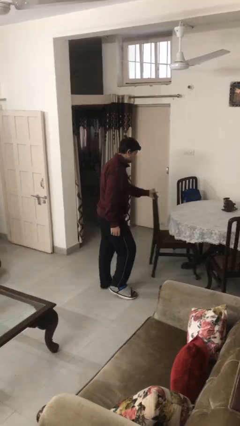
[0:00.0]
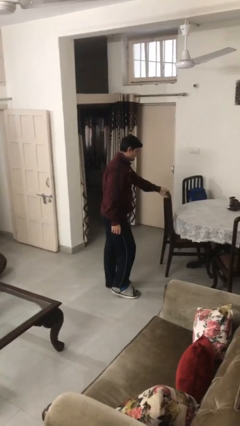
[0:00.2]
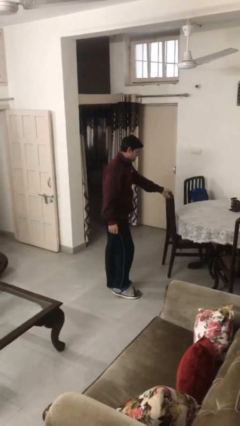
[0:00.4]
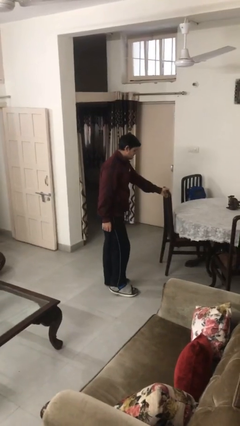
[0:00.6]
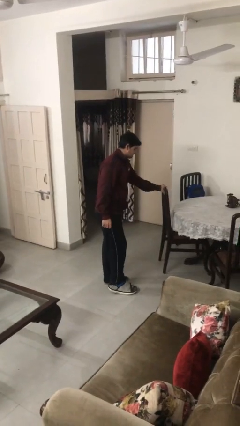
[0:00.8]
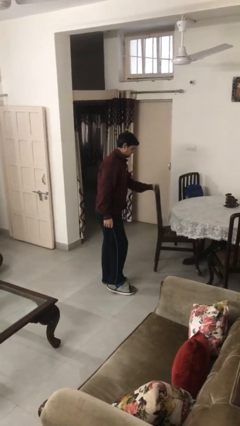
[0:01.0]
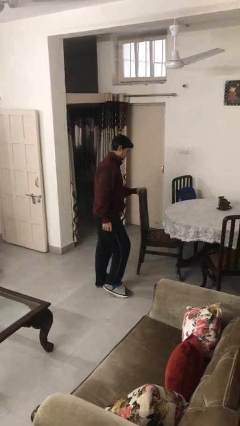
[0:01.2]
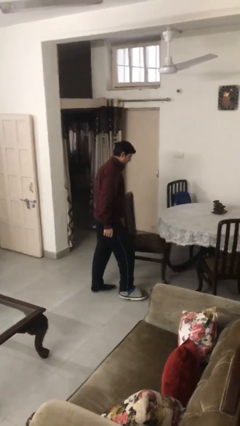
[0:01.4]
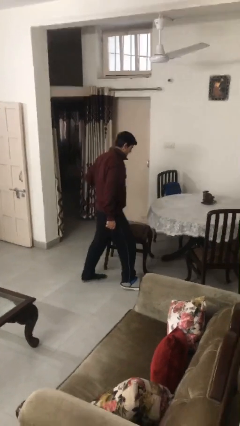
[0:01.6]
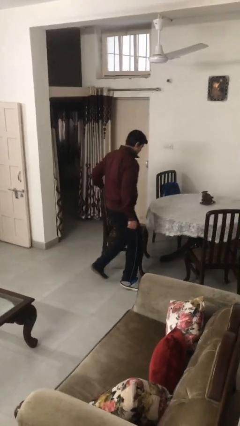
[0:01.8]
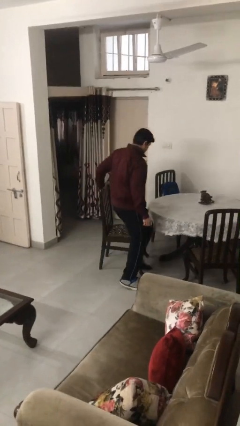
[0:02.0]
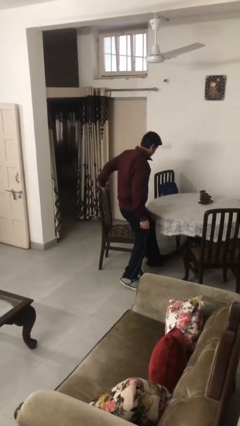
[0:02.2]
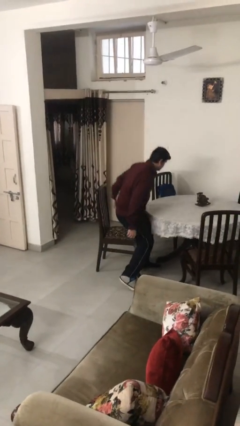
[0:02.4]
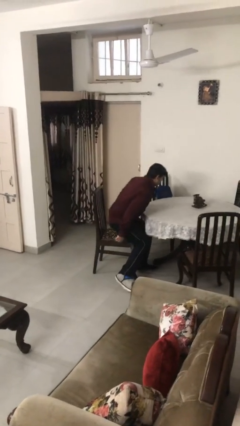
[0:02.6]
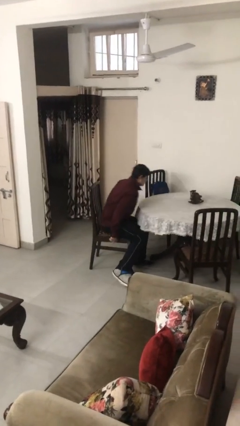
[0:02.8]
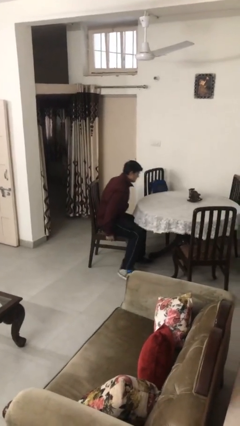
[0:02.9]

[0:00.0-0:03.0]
person sits down

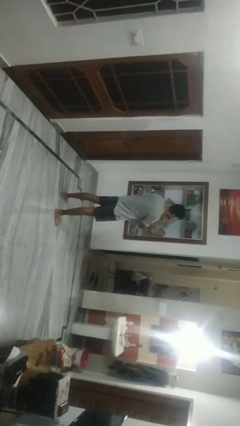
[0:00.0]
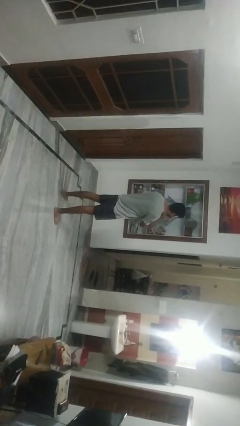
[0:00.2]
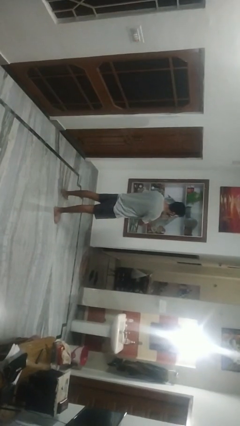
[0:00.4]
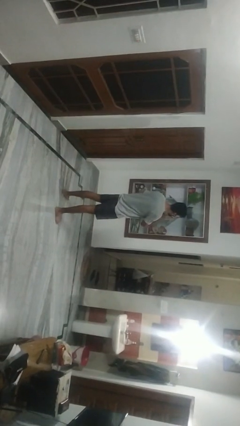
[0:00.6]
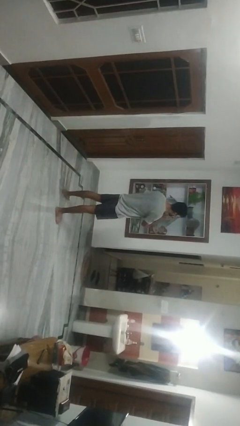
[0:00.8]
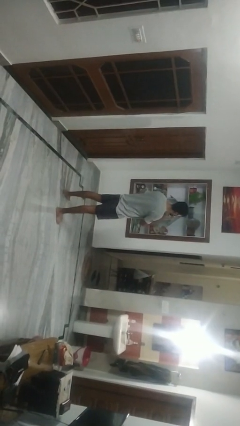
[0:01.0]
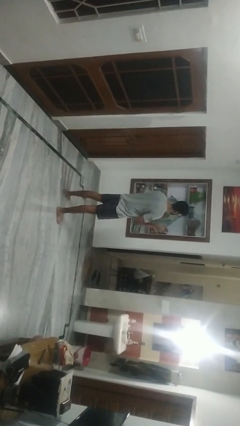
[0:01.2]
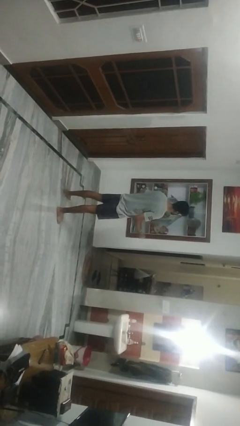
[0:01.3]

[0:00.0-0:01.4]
person scratches face

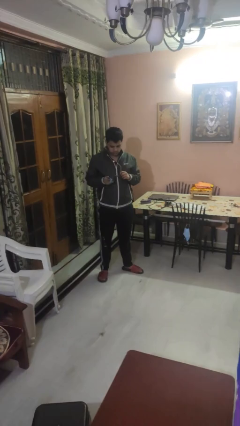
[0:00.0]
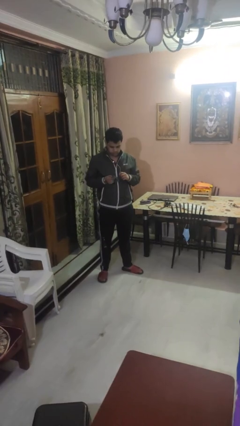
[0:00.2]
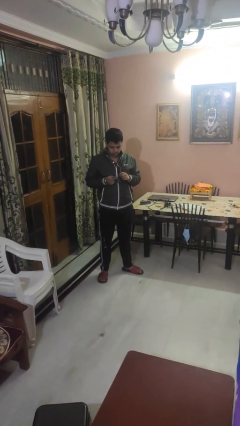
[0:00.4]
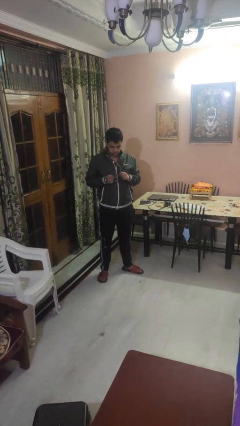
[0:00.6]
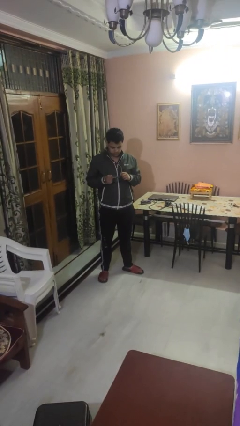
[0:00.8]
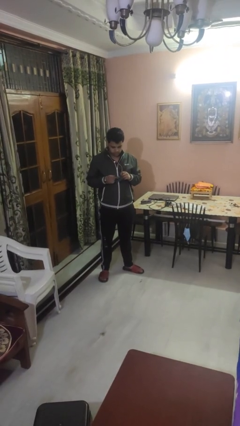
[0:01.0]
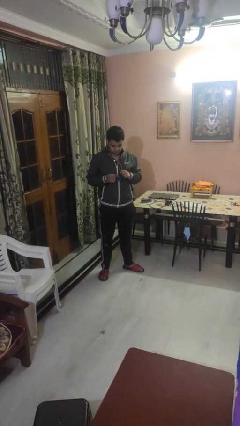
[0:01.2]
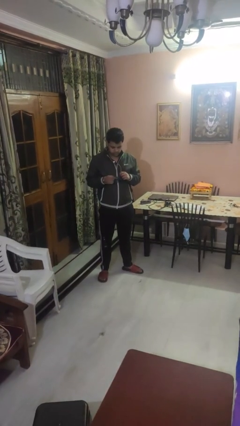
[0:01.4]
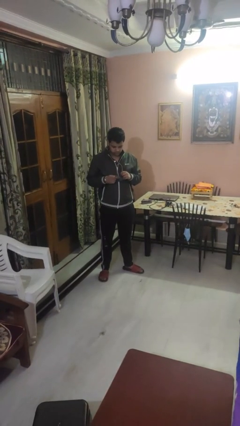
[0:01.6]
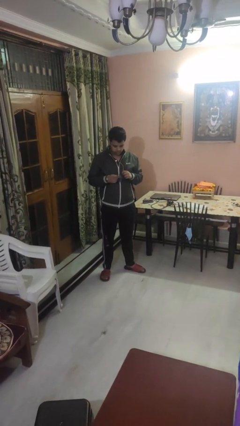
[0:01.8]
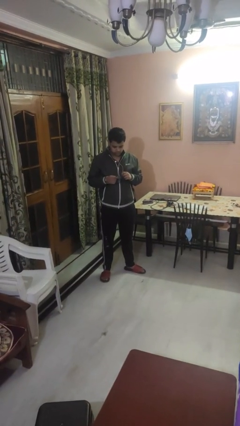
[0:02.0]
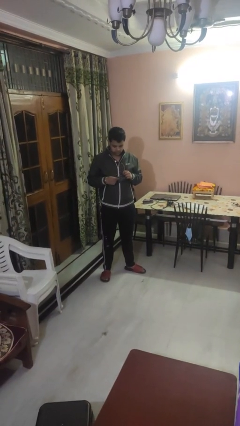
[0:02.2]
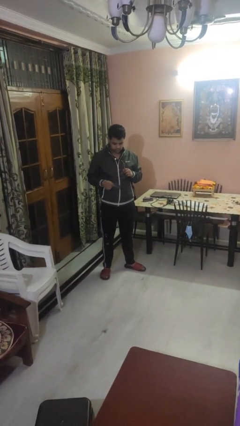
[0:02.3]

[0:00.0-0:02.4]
person cleans eyeglasses

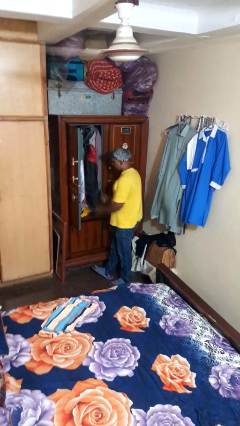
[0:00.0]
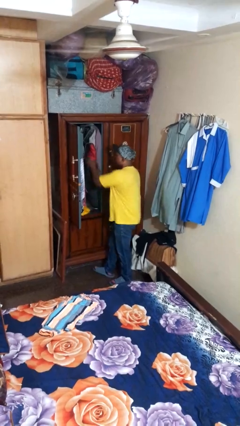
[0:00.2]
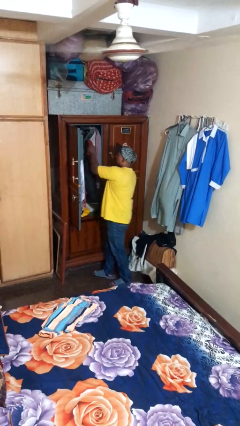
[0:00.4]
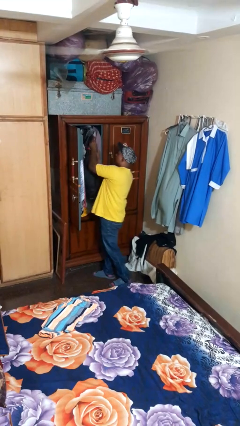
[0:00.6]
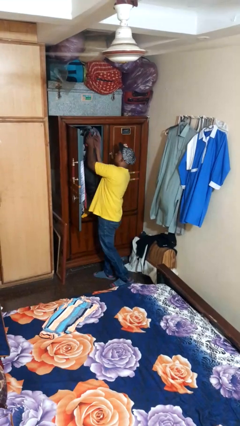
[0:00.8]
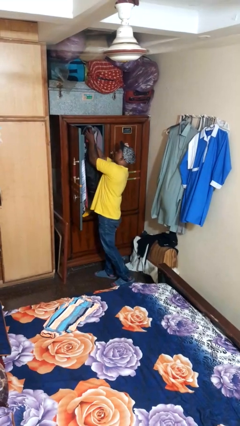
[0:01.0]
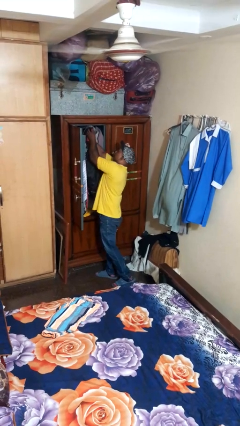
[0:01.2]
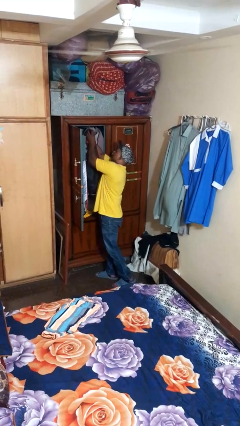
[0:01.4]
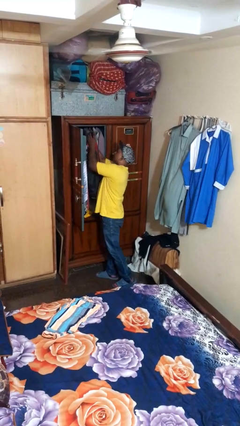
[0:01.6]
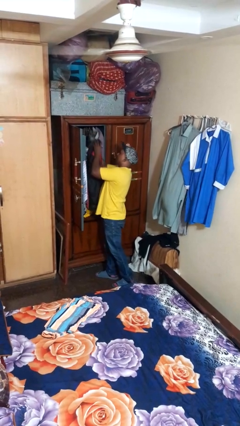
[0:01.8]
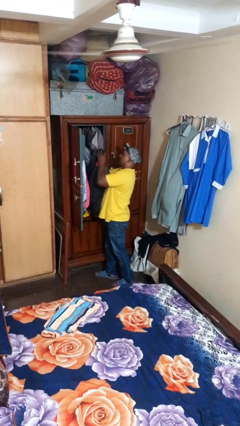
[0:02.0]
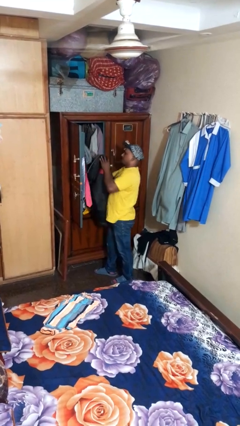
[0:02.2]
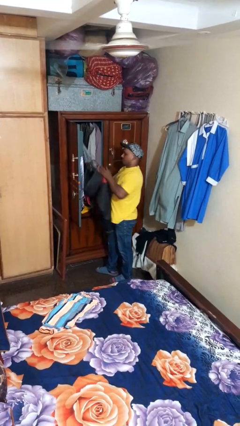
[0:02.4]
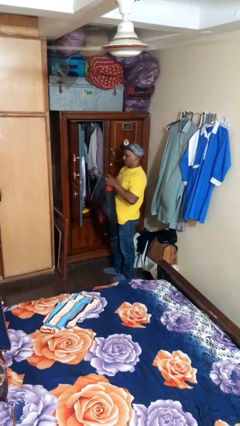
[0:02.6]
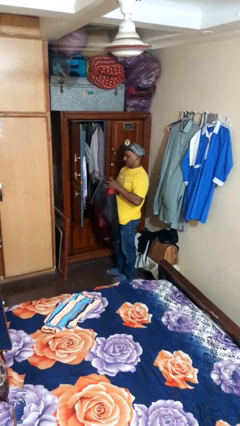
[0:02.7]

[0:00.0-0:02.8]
person takes clothes from closet

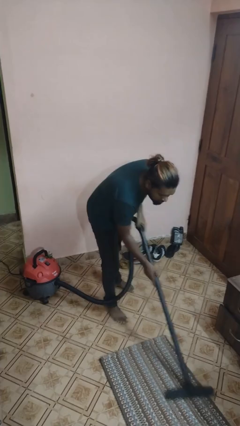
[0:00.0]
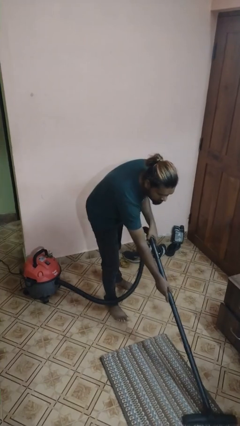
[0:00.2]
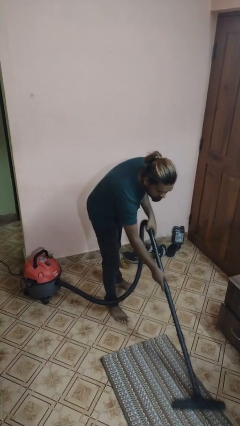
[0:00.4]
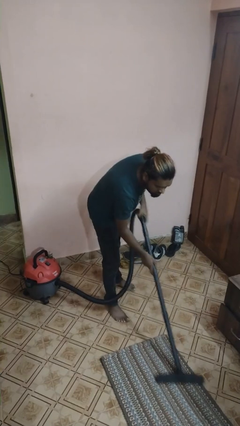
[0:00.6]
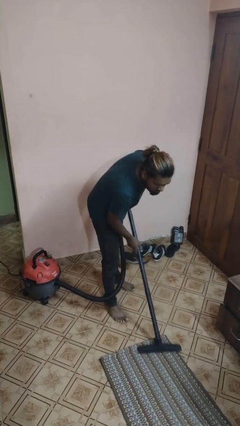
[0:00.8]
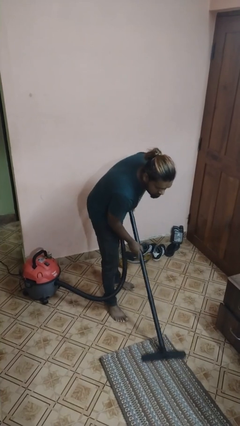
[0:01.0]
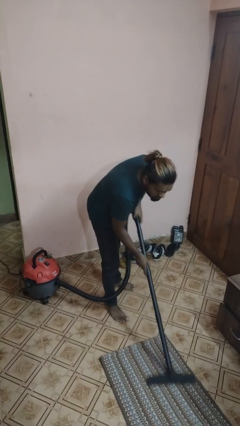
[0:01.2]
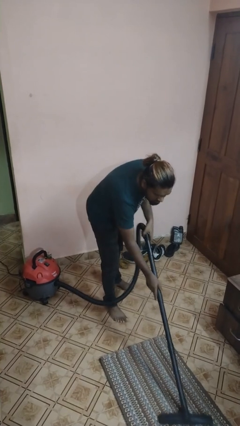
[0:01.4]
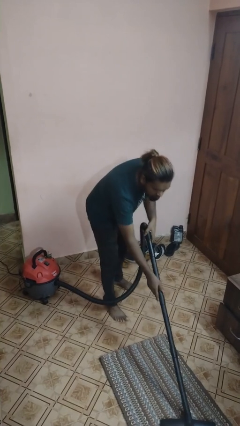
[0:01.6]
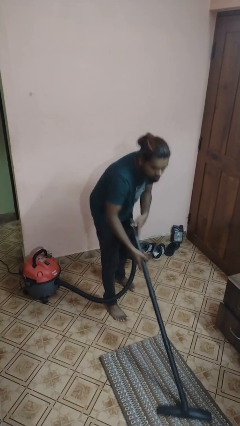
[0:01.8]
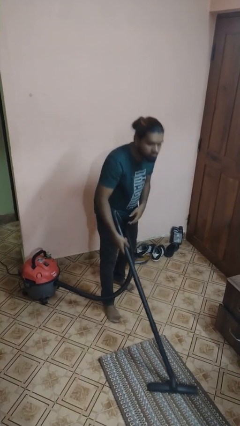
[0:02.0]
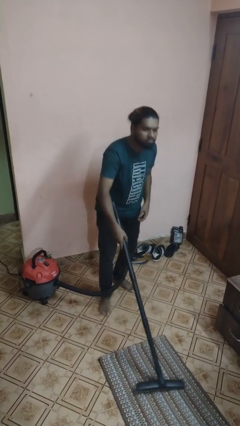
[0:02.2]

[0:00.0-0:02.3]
person vacuums carpet

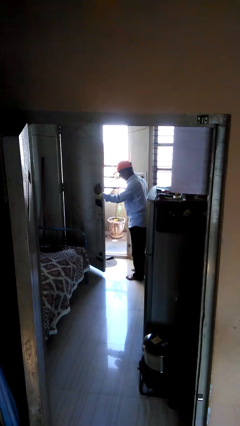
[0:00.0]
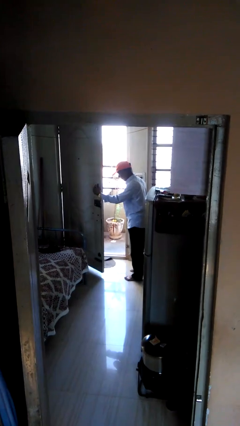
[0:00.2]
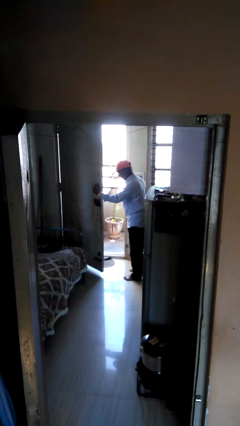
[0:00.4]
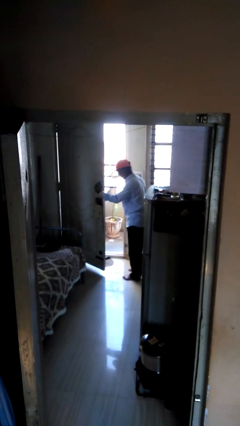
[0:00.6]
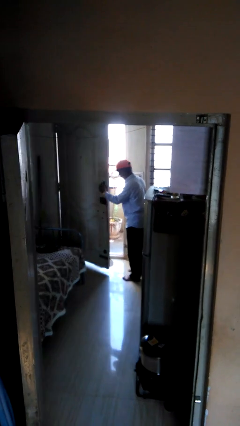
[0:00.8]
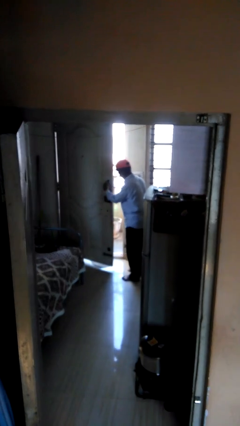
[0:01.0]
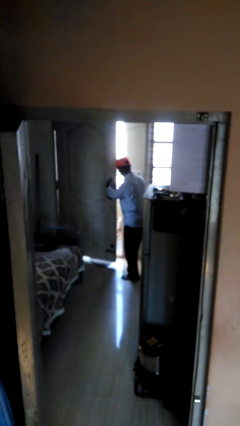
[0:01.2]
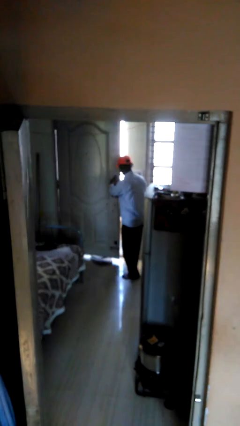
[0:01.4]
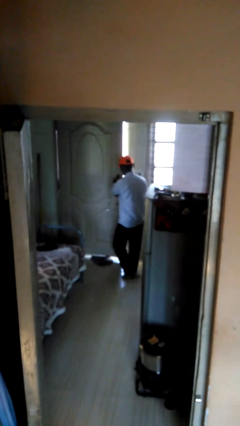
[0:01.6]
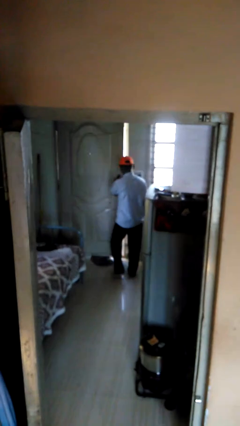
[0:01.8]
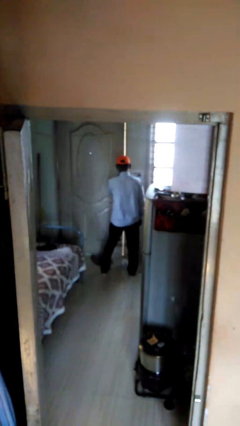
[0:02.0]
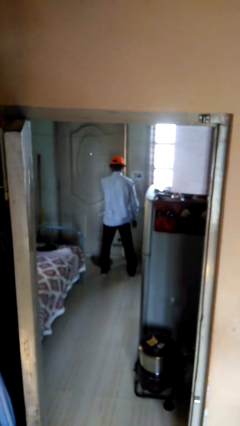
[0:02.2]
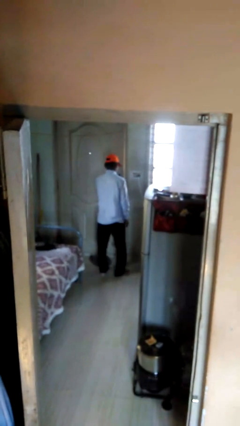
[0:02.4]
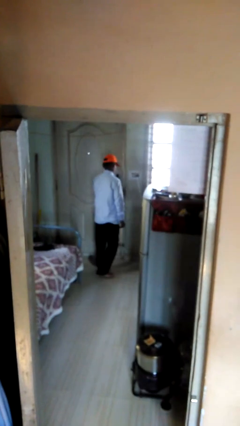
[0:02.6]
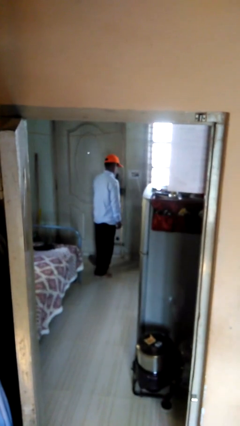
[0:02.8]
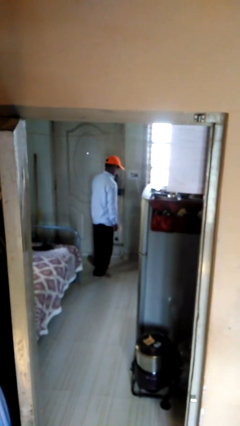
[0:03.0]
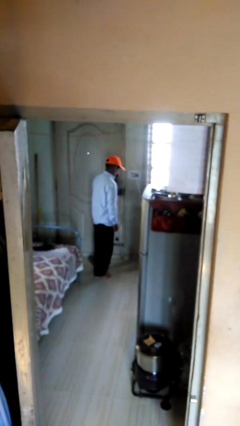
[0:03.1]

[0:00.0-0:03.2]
person closes facility door

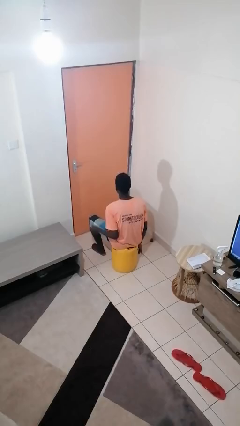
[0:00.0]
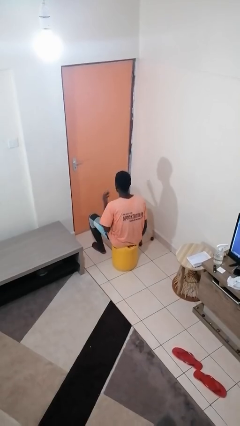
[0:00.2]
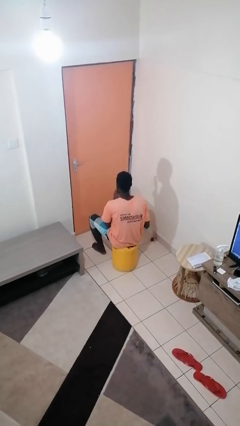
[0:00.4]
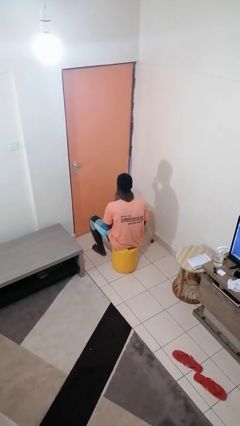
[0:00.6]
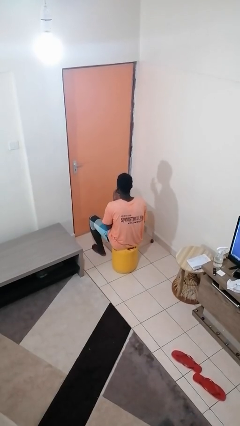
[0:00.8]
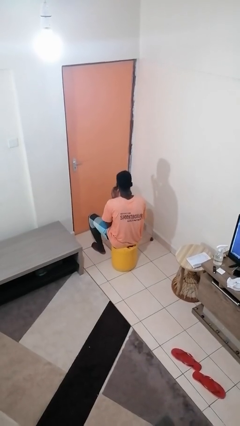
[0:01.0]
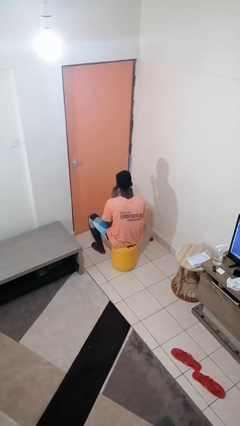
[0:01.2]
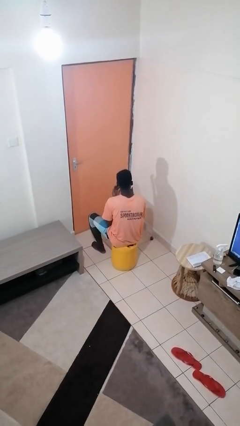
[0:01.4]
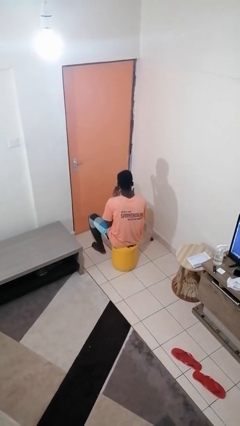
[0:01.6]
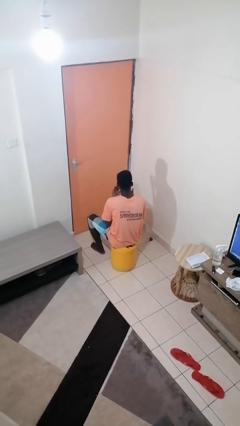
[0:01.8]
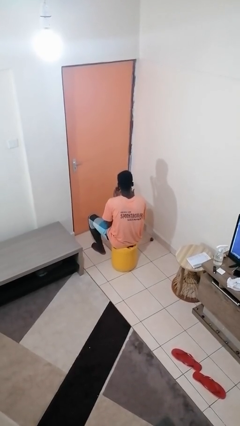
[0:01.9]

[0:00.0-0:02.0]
person licks fingers
